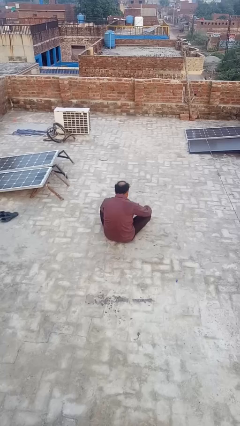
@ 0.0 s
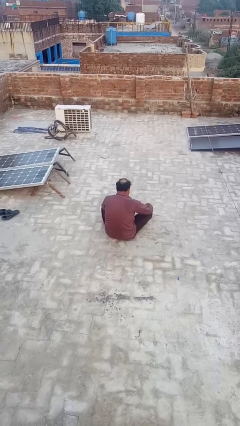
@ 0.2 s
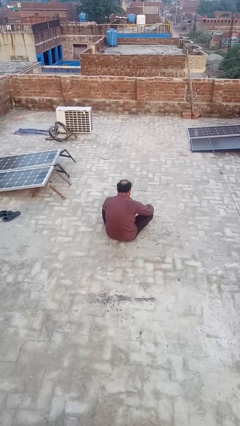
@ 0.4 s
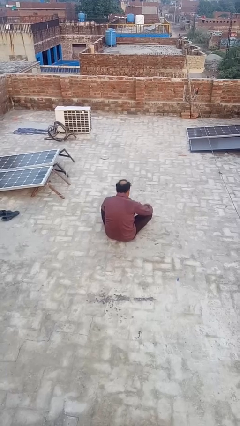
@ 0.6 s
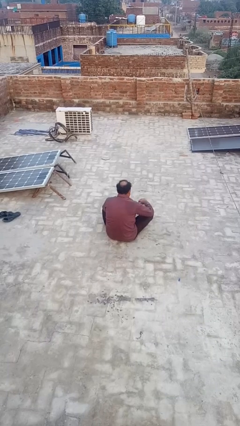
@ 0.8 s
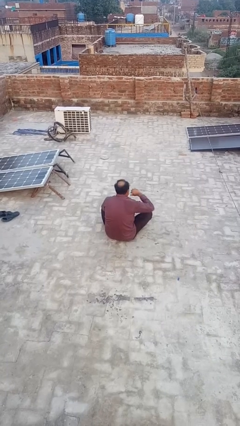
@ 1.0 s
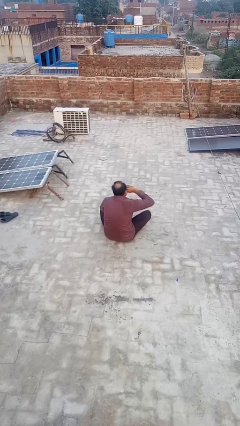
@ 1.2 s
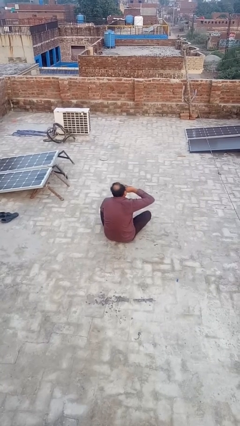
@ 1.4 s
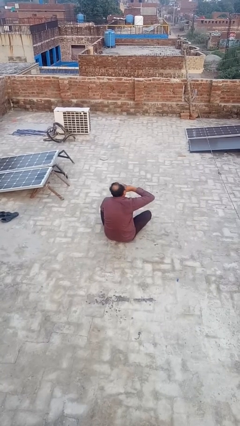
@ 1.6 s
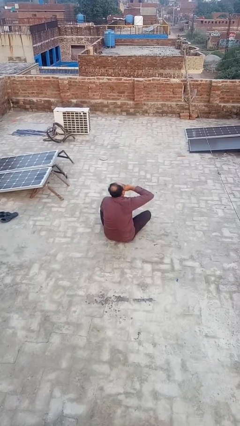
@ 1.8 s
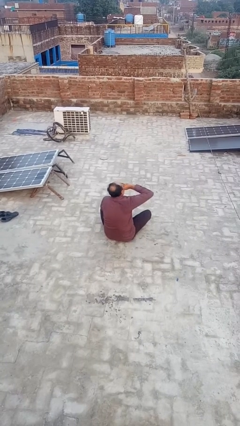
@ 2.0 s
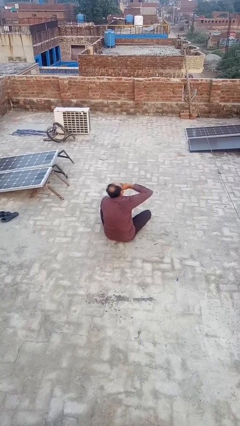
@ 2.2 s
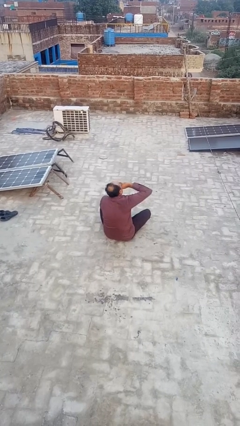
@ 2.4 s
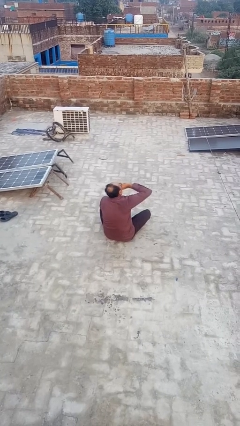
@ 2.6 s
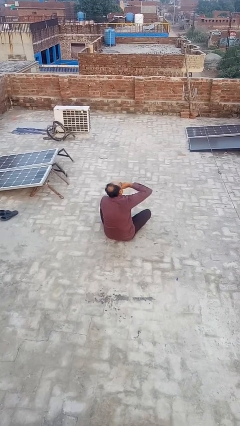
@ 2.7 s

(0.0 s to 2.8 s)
person yawns

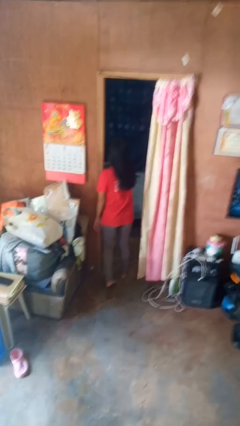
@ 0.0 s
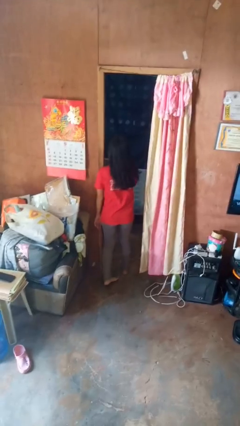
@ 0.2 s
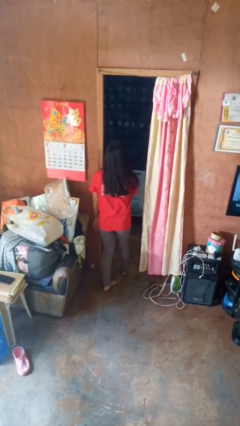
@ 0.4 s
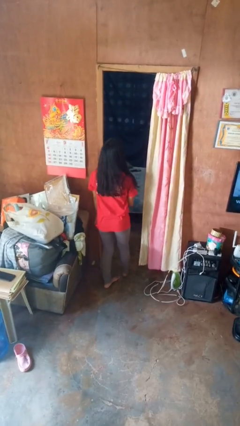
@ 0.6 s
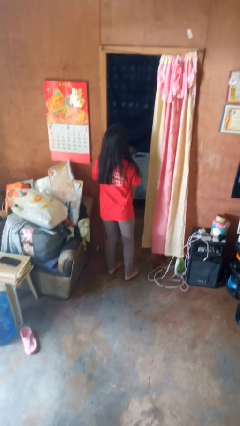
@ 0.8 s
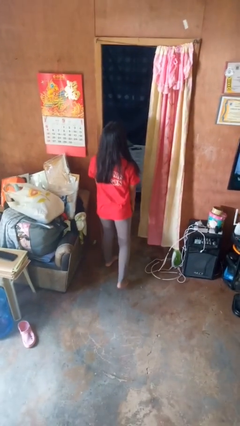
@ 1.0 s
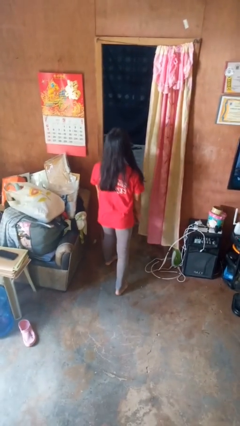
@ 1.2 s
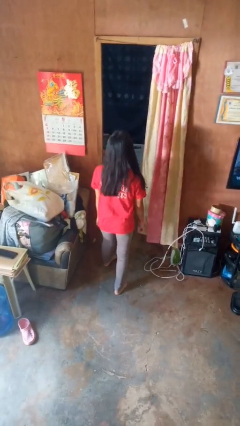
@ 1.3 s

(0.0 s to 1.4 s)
person bumps into wall

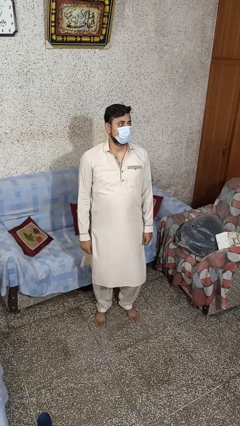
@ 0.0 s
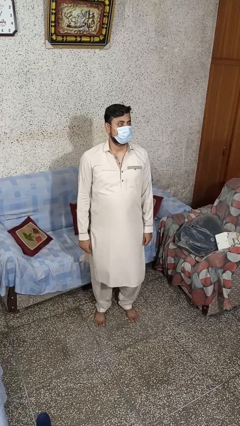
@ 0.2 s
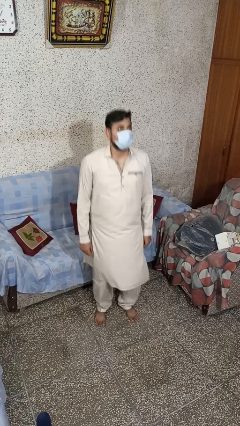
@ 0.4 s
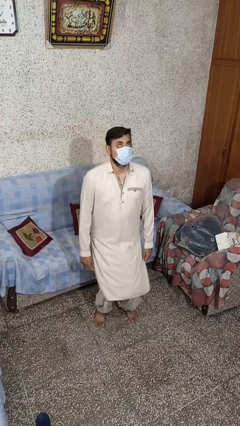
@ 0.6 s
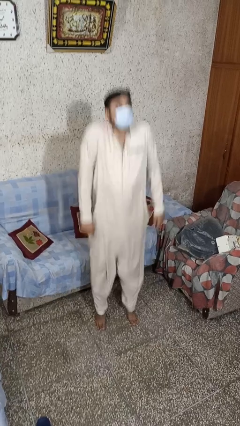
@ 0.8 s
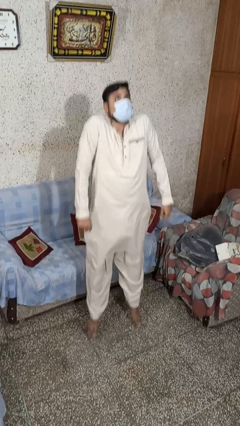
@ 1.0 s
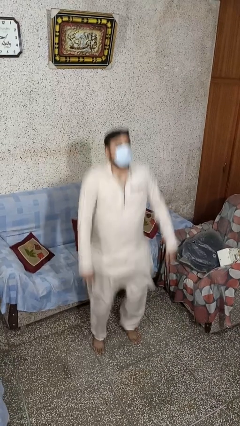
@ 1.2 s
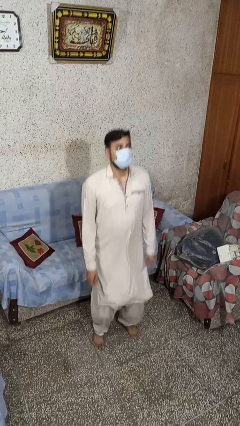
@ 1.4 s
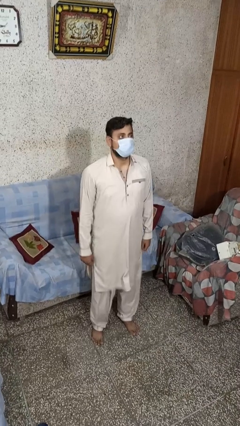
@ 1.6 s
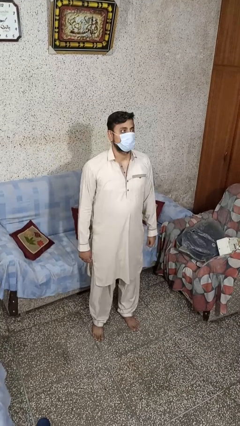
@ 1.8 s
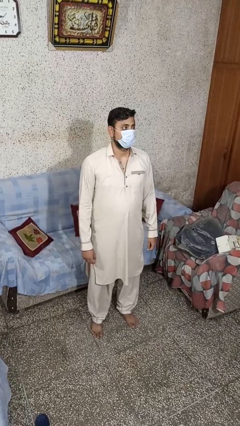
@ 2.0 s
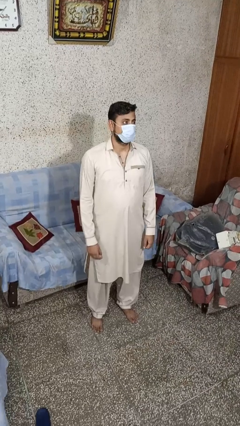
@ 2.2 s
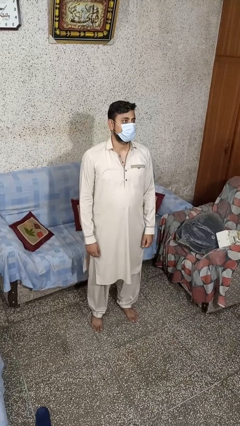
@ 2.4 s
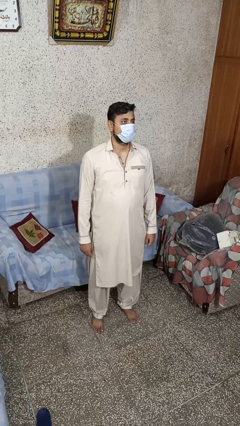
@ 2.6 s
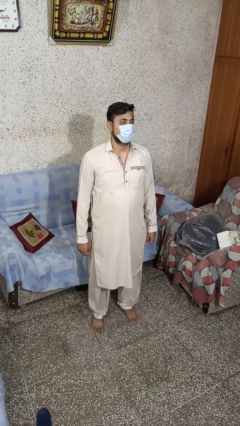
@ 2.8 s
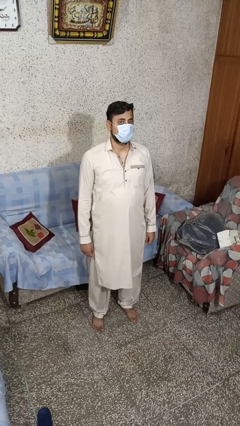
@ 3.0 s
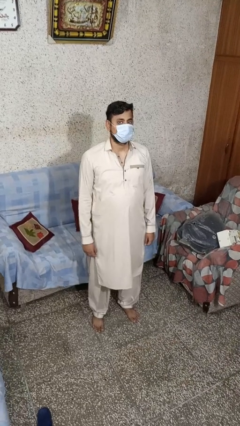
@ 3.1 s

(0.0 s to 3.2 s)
person jumps

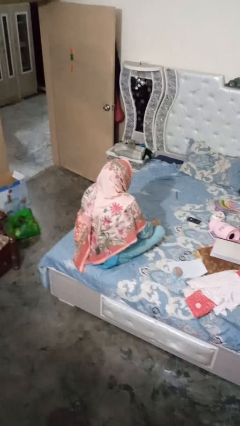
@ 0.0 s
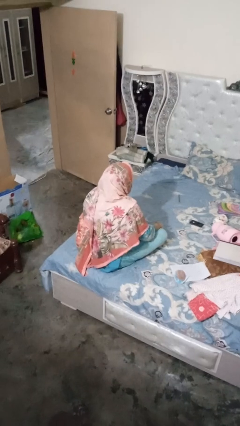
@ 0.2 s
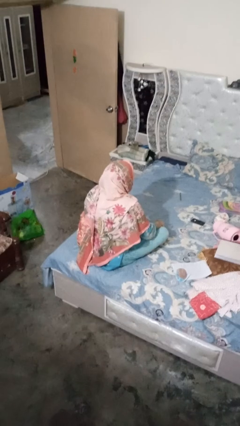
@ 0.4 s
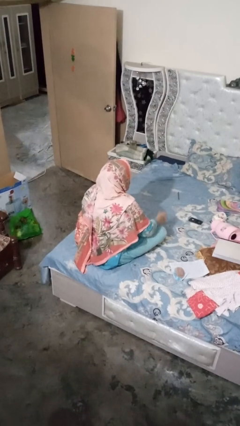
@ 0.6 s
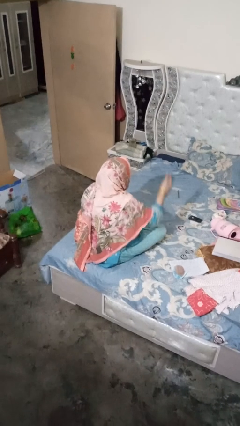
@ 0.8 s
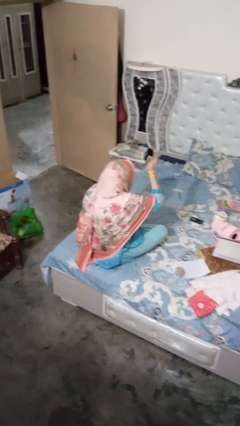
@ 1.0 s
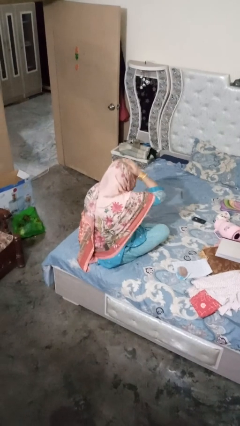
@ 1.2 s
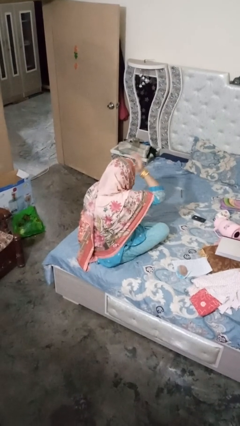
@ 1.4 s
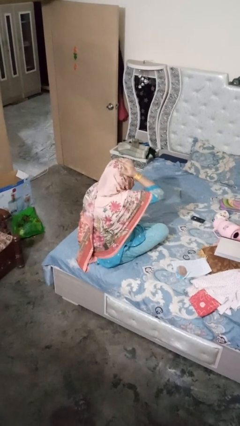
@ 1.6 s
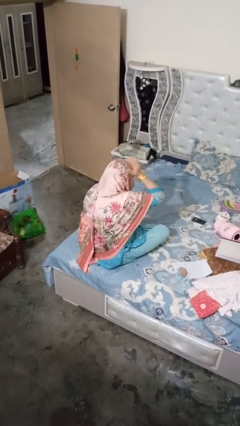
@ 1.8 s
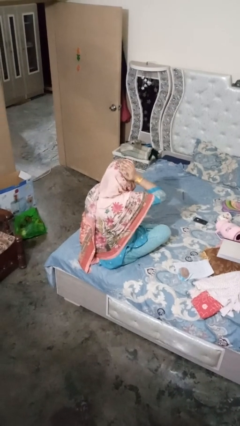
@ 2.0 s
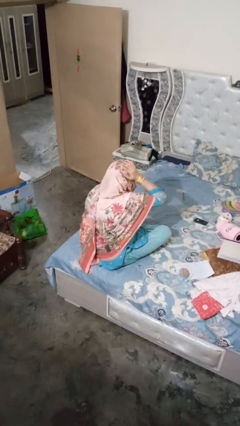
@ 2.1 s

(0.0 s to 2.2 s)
person pats head

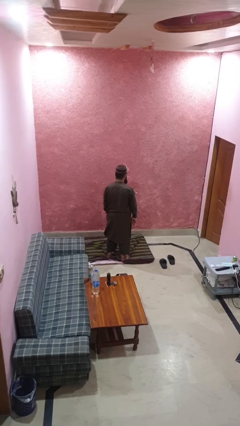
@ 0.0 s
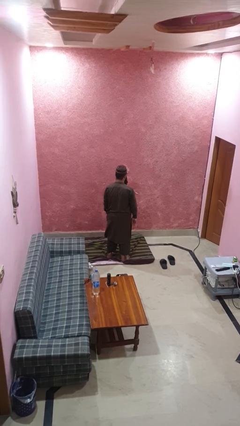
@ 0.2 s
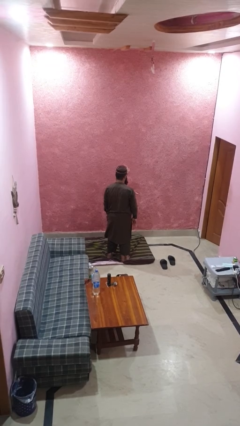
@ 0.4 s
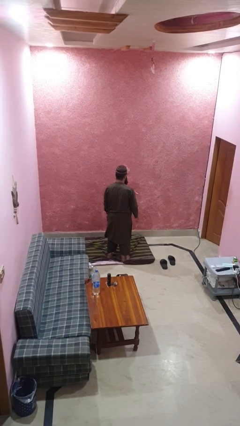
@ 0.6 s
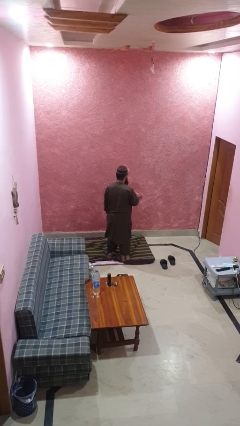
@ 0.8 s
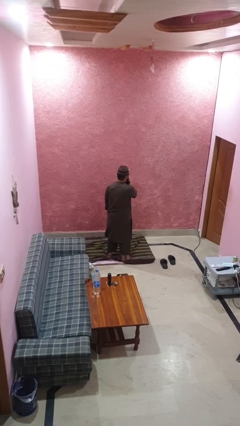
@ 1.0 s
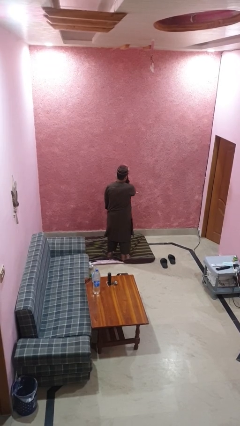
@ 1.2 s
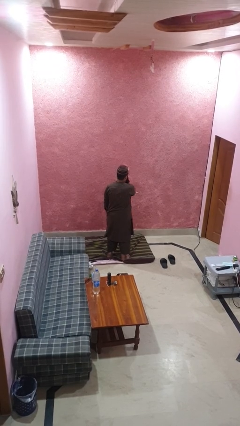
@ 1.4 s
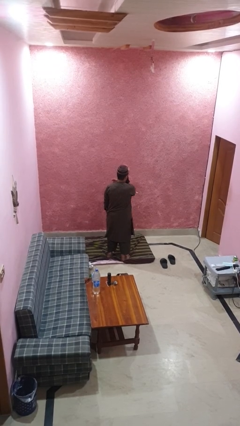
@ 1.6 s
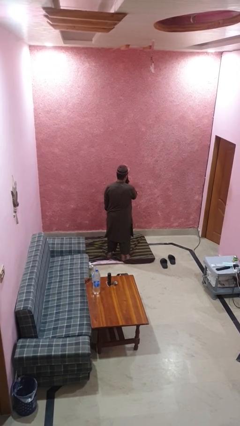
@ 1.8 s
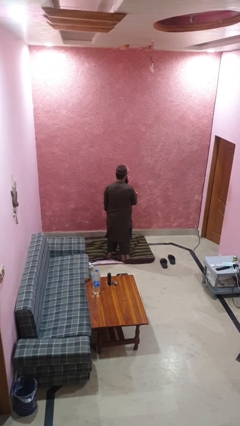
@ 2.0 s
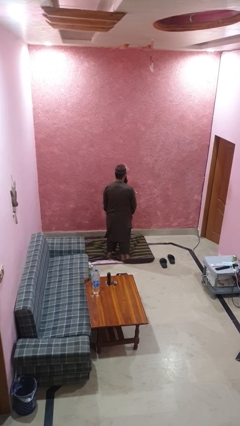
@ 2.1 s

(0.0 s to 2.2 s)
person drums on chest

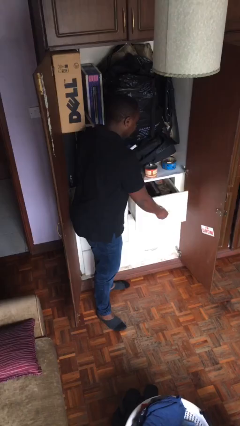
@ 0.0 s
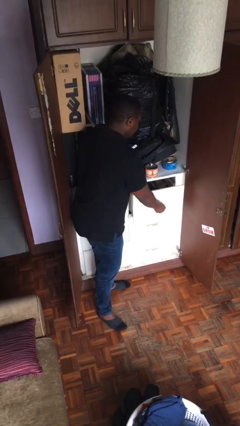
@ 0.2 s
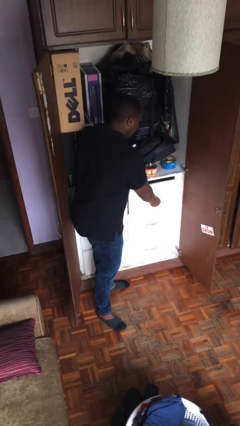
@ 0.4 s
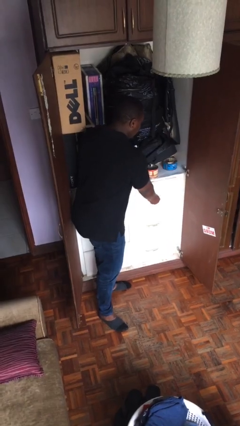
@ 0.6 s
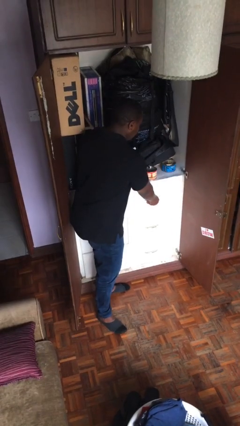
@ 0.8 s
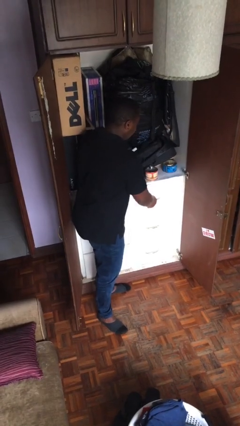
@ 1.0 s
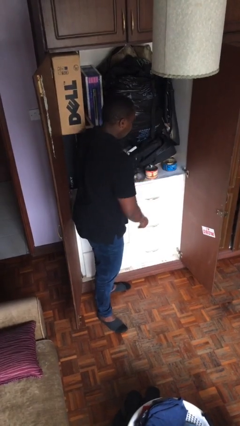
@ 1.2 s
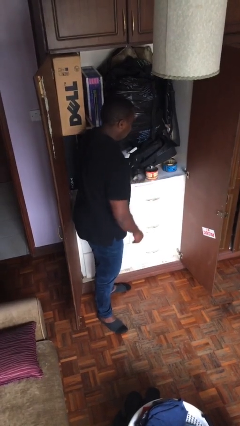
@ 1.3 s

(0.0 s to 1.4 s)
person closes dresser drawer

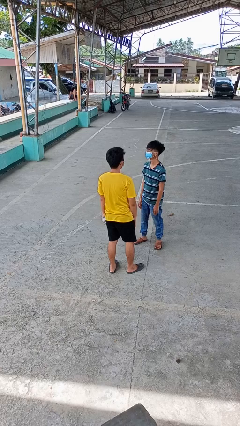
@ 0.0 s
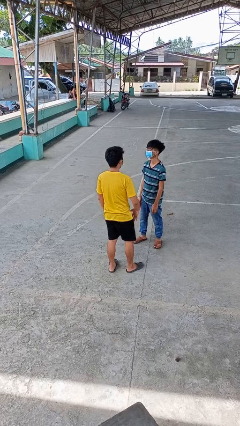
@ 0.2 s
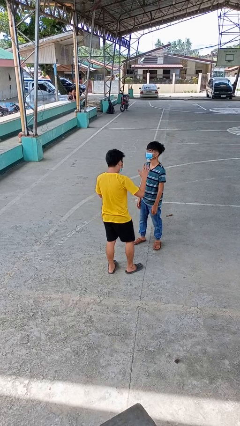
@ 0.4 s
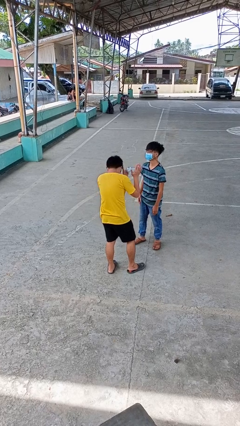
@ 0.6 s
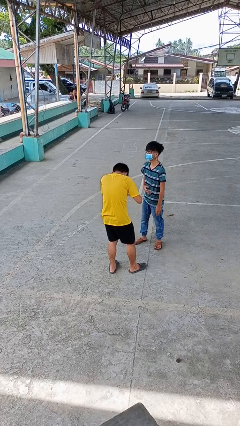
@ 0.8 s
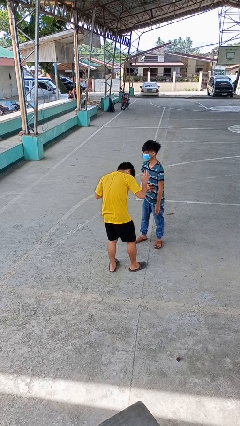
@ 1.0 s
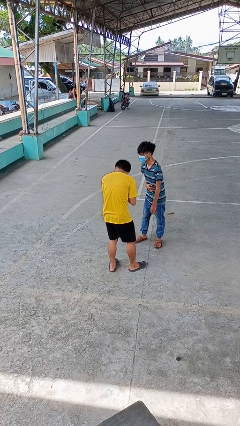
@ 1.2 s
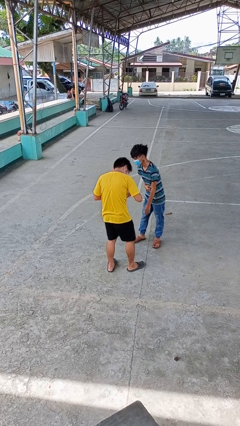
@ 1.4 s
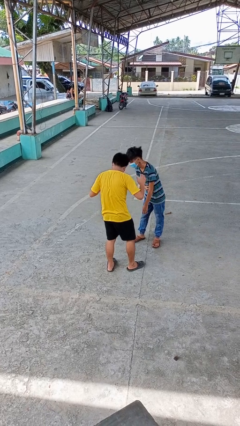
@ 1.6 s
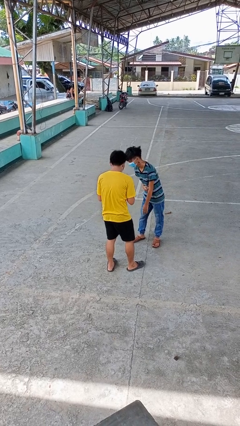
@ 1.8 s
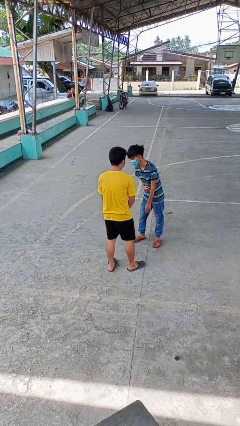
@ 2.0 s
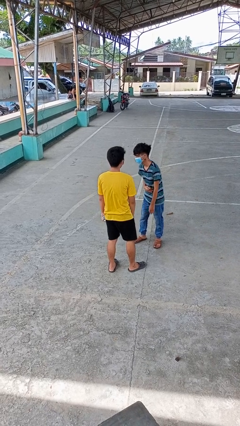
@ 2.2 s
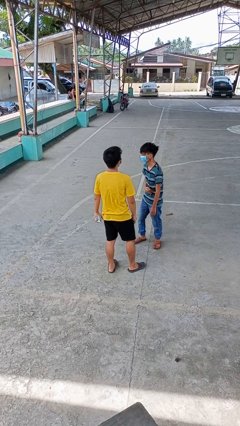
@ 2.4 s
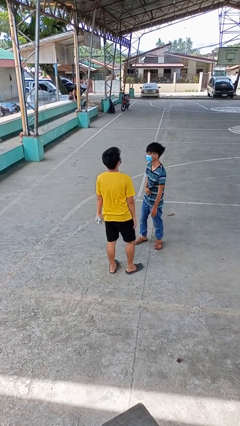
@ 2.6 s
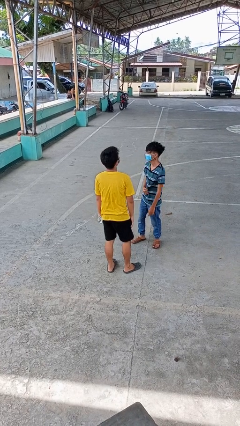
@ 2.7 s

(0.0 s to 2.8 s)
person laughs with person

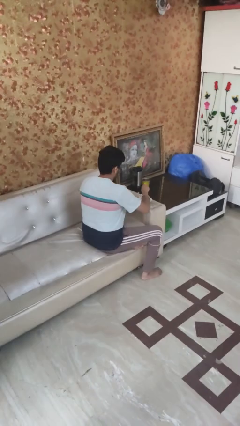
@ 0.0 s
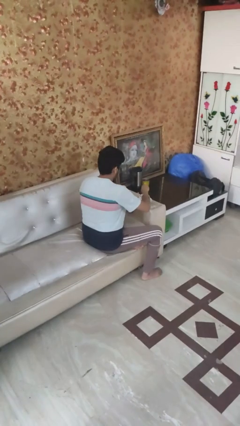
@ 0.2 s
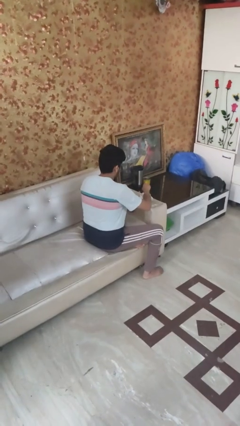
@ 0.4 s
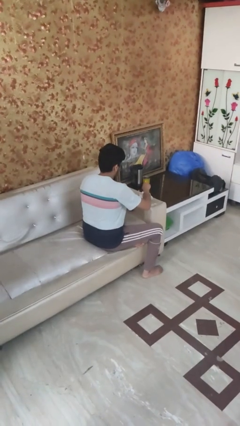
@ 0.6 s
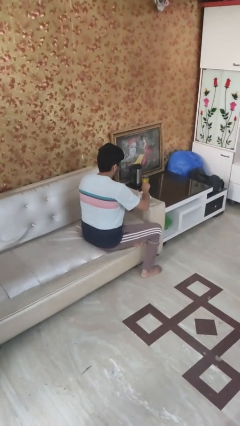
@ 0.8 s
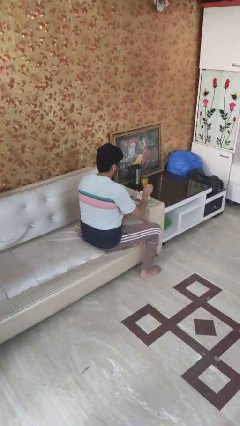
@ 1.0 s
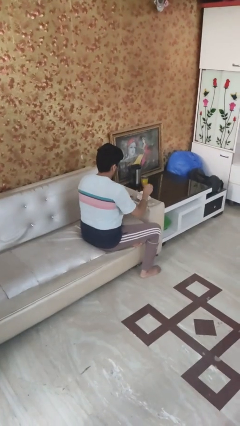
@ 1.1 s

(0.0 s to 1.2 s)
person stirs mug
